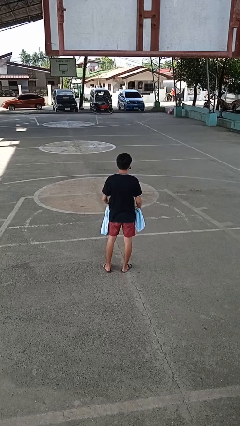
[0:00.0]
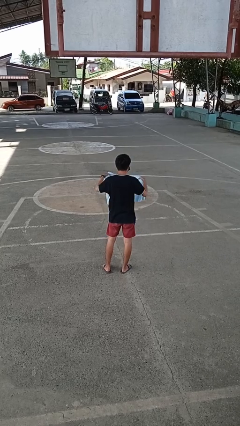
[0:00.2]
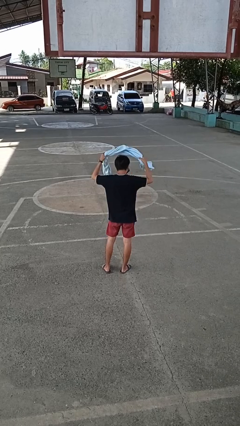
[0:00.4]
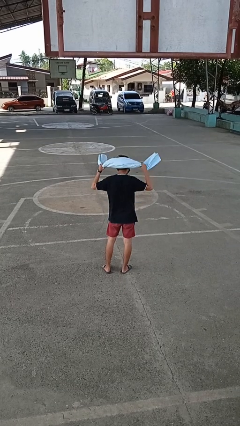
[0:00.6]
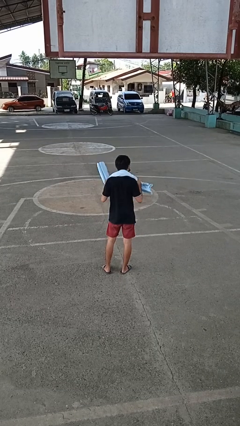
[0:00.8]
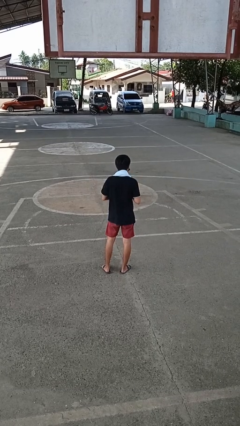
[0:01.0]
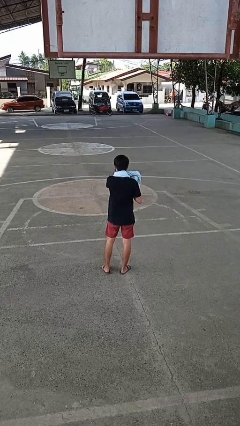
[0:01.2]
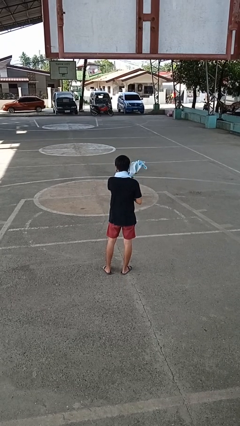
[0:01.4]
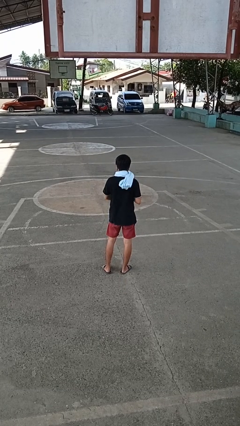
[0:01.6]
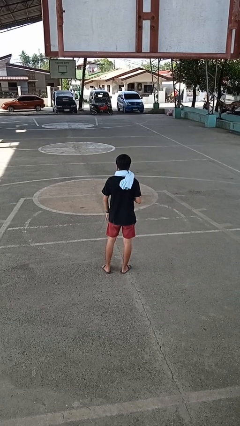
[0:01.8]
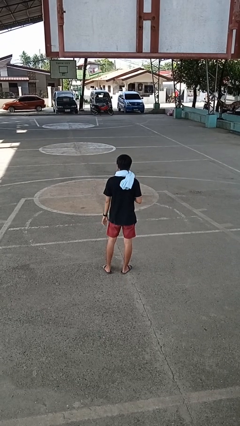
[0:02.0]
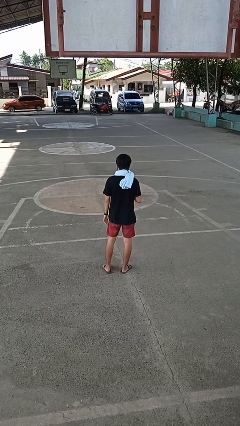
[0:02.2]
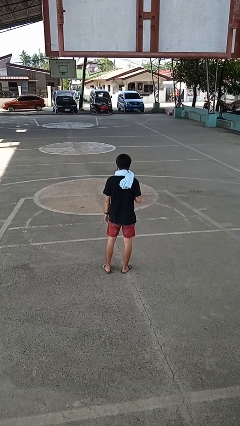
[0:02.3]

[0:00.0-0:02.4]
person puts on scarf

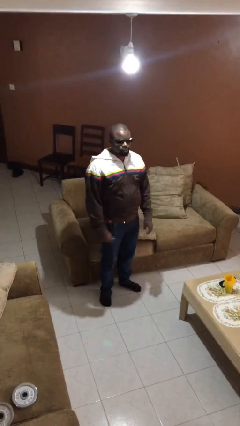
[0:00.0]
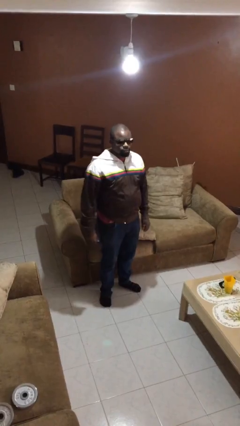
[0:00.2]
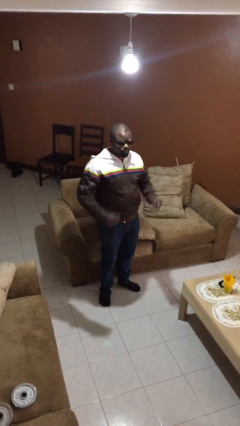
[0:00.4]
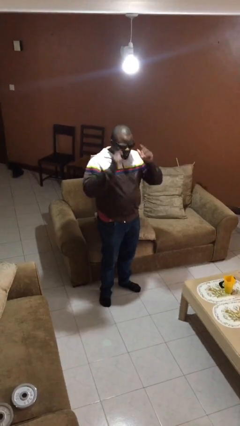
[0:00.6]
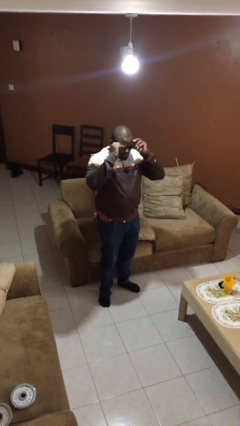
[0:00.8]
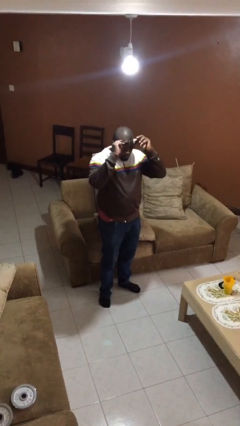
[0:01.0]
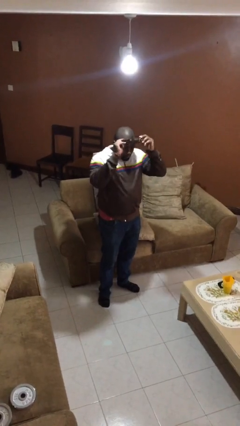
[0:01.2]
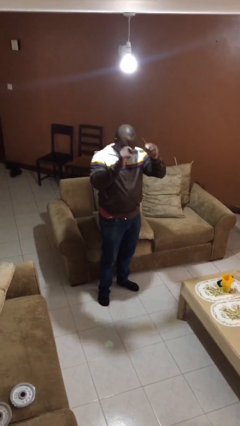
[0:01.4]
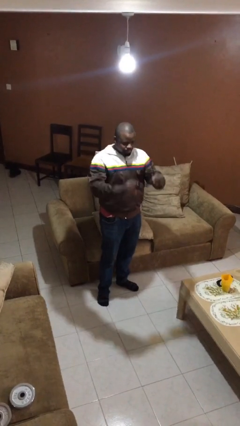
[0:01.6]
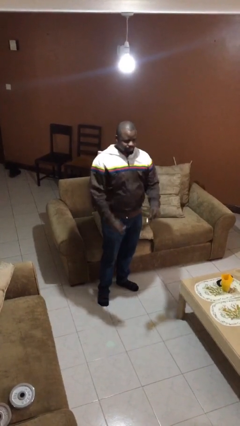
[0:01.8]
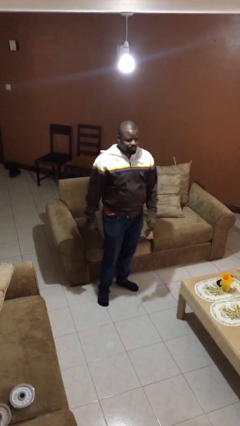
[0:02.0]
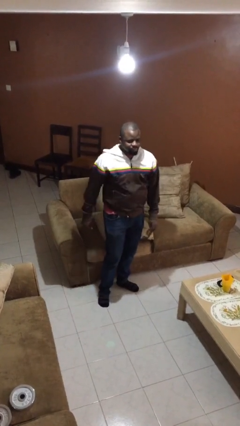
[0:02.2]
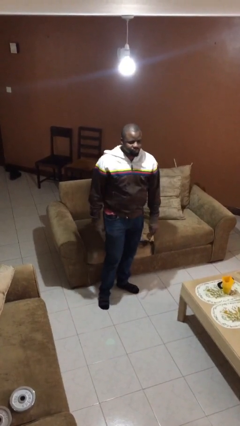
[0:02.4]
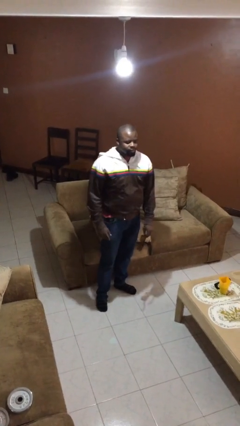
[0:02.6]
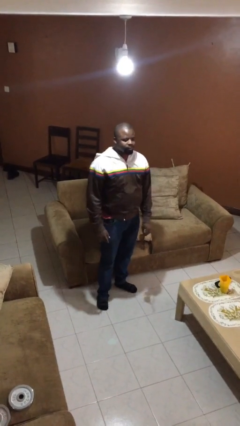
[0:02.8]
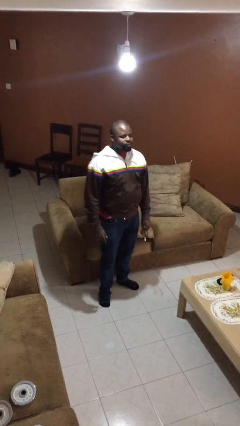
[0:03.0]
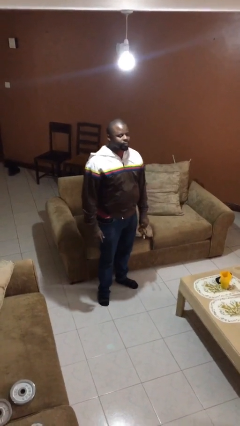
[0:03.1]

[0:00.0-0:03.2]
person takes off sunglasses

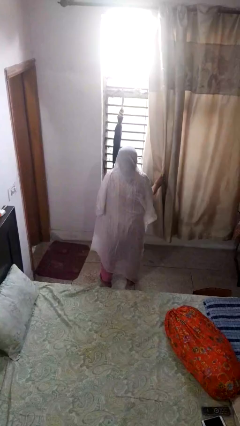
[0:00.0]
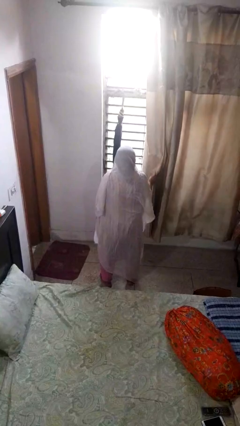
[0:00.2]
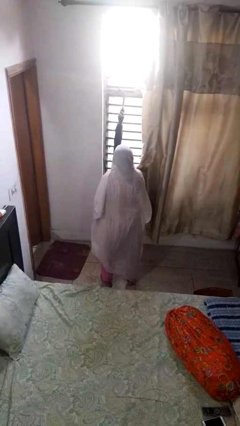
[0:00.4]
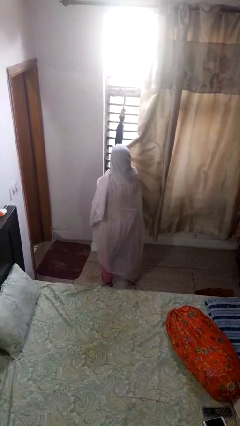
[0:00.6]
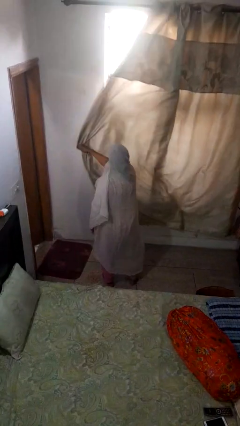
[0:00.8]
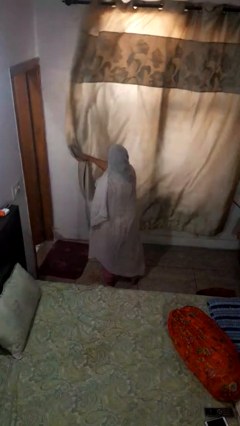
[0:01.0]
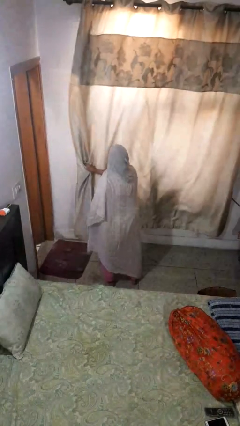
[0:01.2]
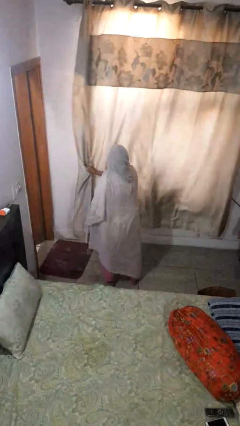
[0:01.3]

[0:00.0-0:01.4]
person closes curtains

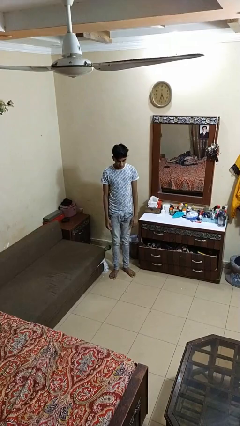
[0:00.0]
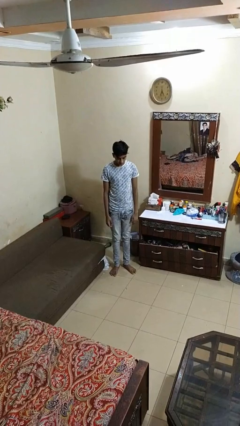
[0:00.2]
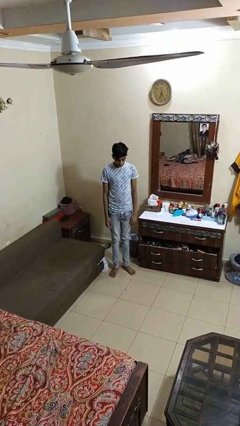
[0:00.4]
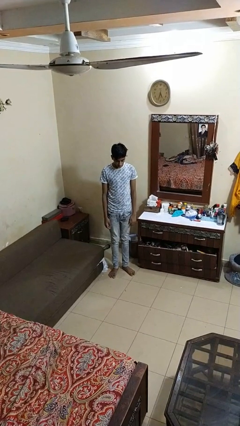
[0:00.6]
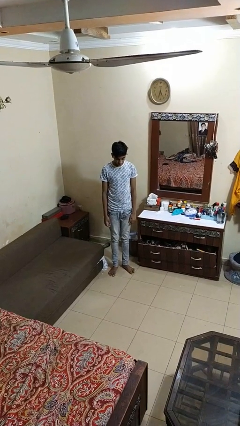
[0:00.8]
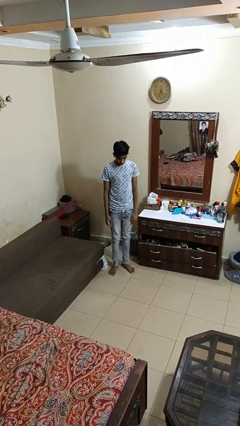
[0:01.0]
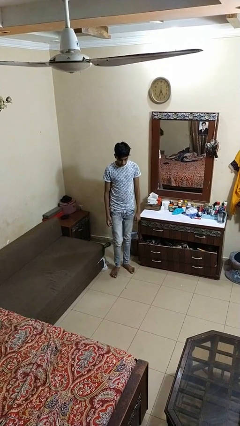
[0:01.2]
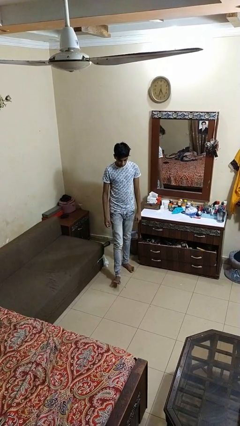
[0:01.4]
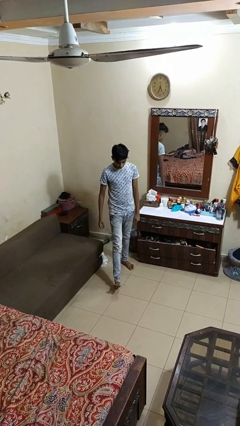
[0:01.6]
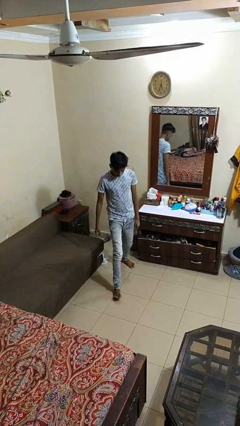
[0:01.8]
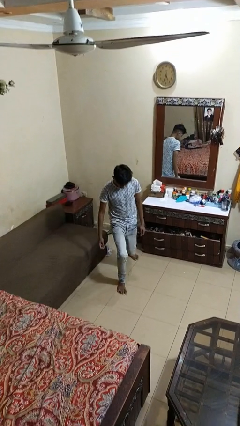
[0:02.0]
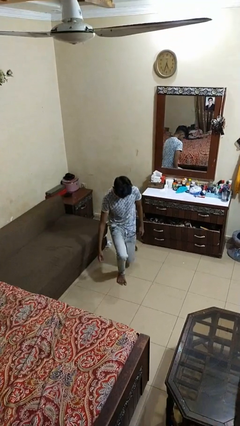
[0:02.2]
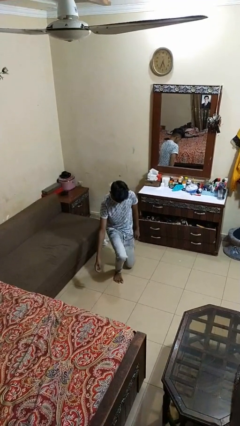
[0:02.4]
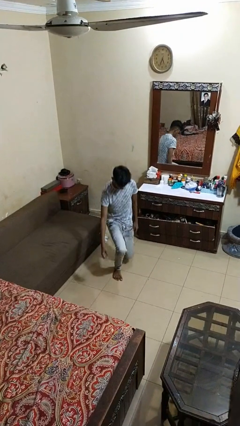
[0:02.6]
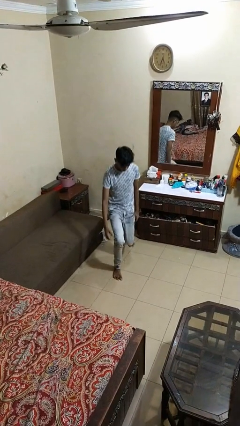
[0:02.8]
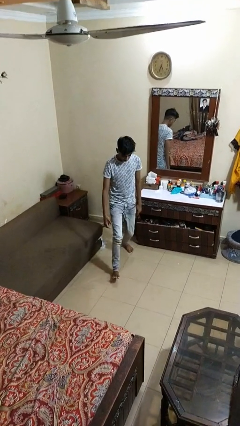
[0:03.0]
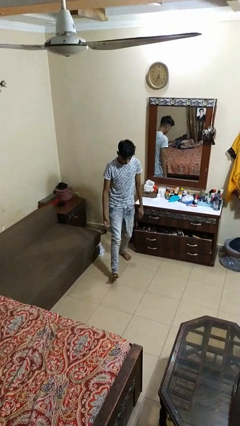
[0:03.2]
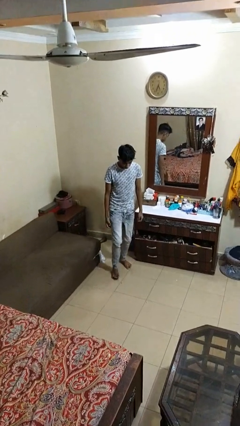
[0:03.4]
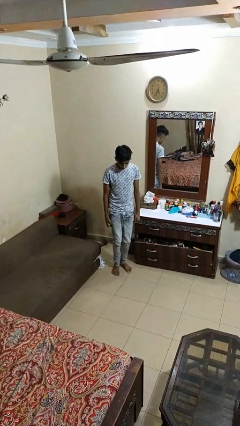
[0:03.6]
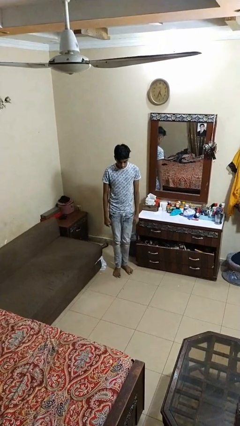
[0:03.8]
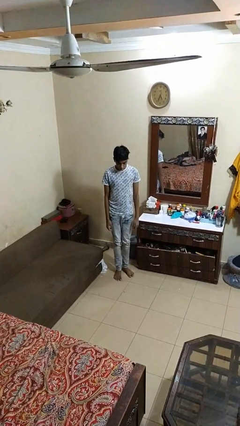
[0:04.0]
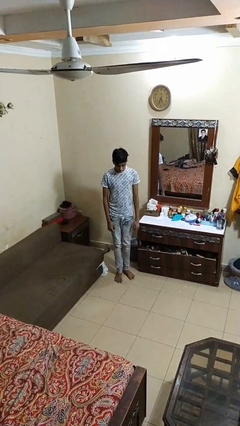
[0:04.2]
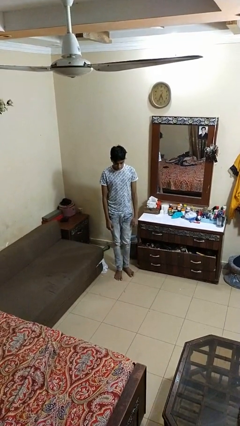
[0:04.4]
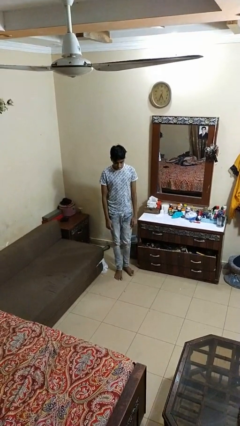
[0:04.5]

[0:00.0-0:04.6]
person exercises with lunges

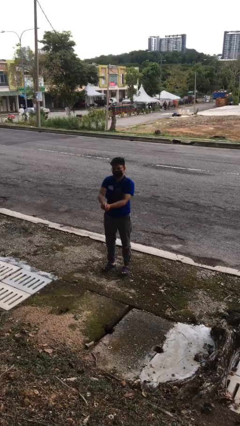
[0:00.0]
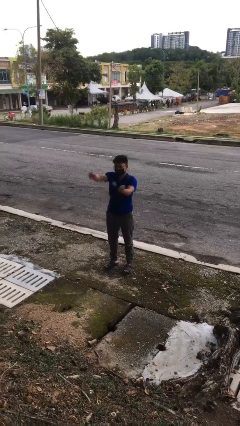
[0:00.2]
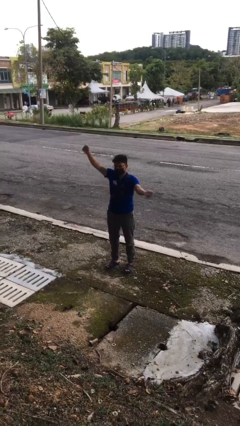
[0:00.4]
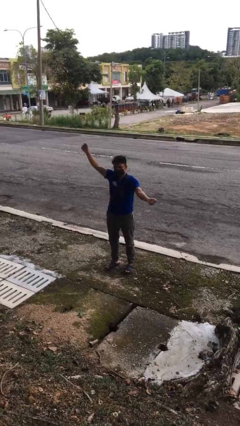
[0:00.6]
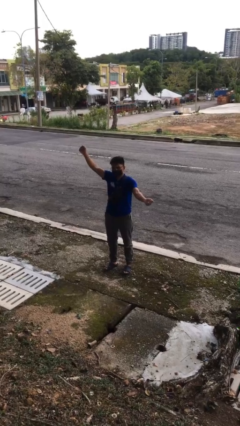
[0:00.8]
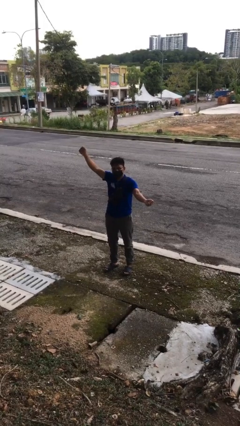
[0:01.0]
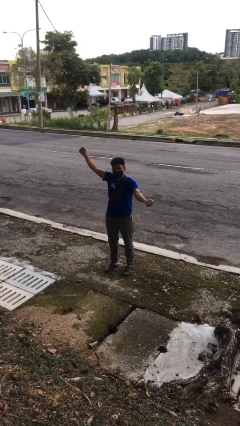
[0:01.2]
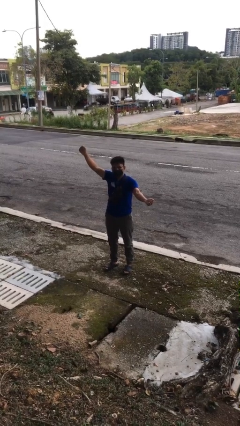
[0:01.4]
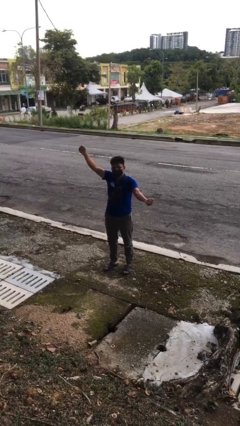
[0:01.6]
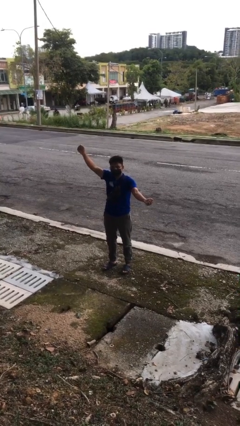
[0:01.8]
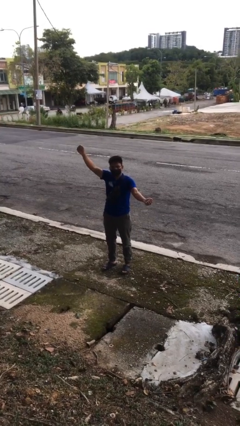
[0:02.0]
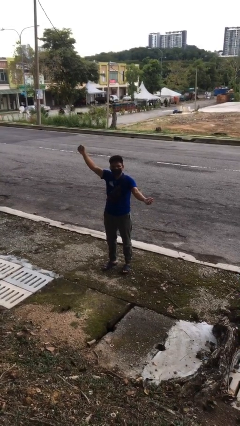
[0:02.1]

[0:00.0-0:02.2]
person gestures zoom in

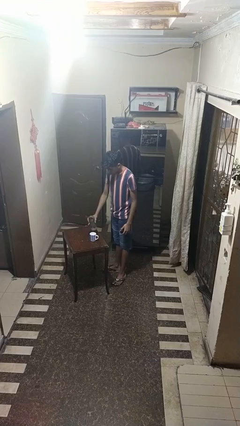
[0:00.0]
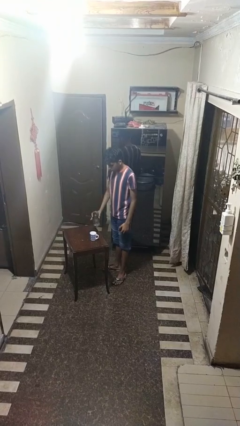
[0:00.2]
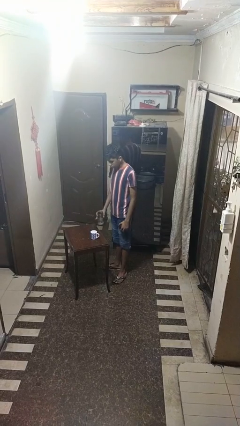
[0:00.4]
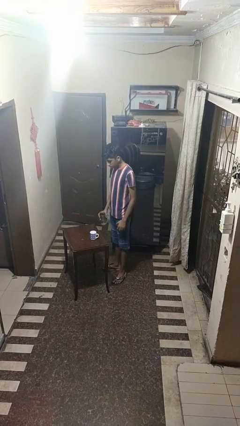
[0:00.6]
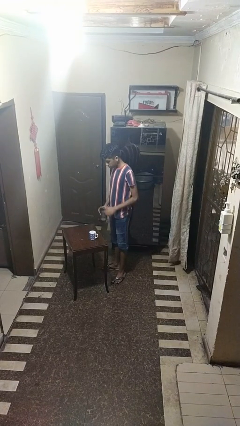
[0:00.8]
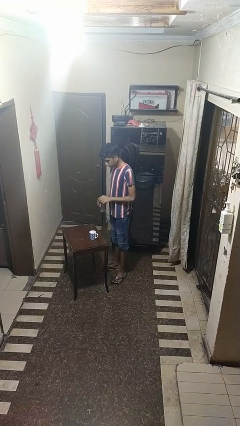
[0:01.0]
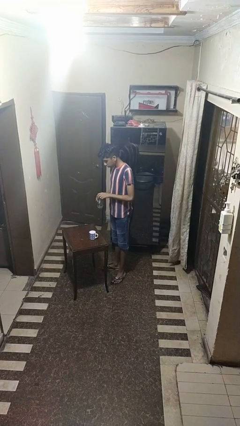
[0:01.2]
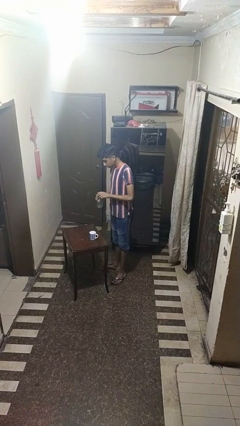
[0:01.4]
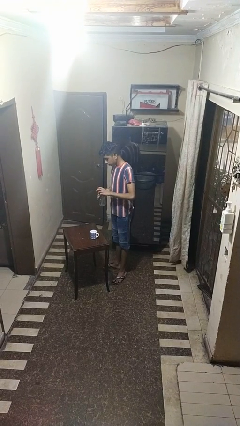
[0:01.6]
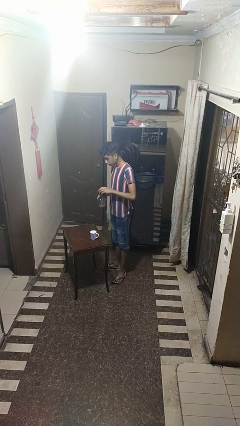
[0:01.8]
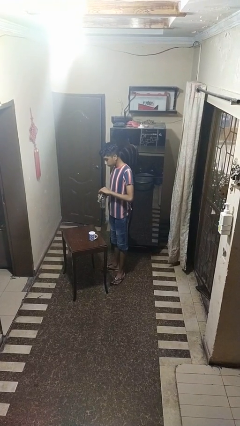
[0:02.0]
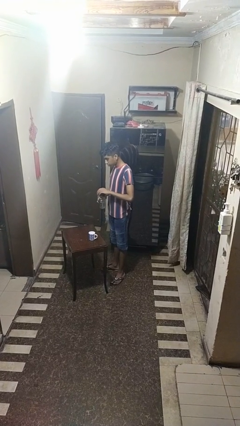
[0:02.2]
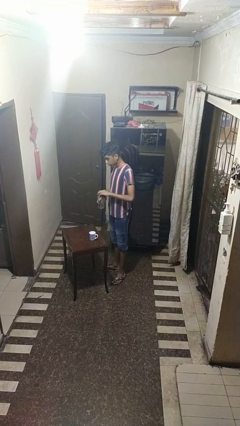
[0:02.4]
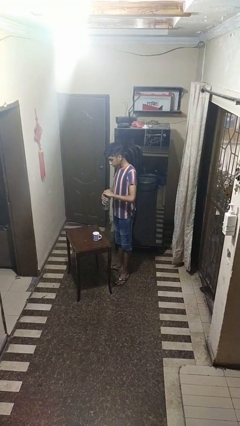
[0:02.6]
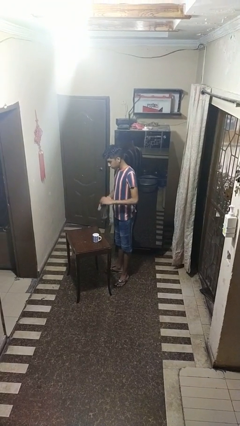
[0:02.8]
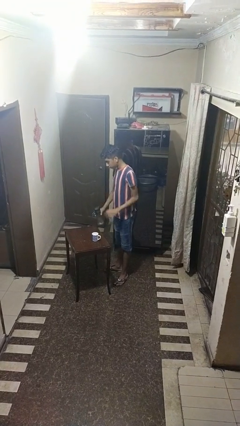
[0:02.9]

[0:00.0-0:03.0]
person screws lid to bottle

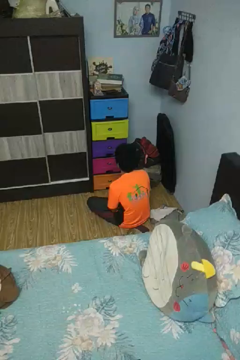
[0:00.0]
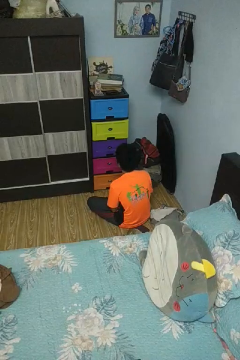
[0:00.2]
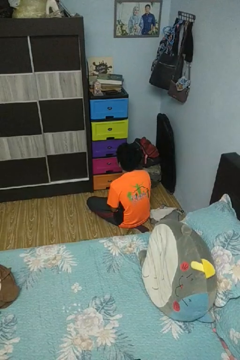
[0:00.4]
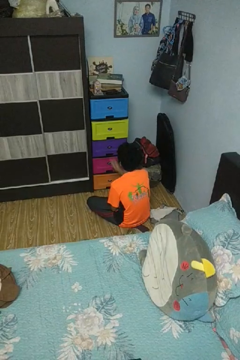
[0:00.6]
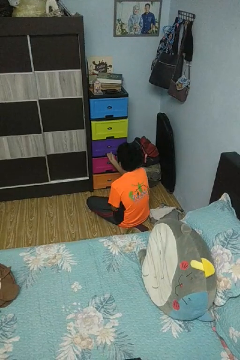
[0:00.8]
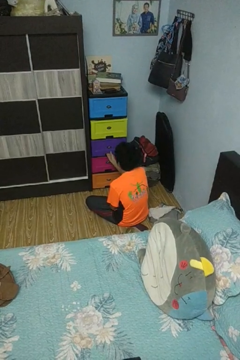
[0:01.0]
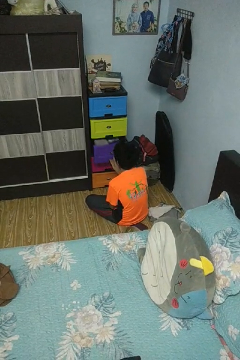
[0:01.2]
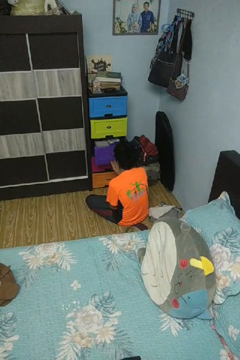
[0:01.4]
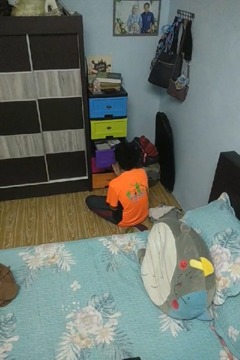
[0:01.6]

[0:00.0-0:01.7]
person opens dresser drawer
